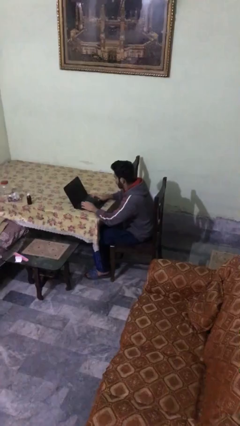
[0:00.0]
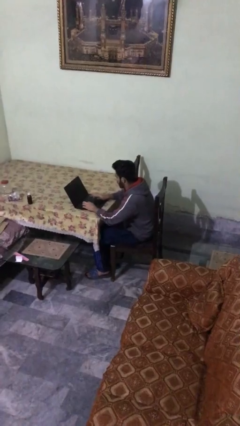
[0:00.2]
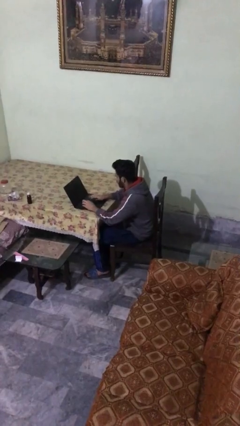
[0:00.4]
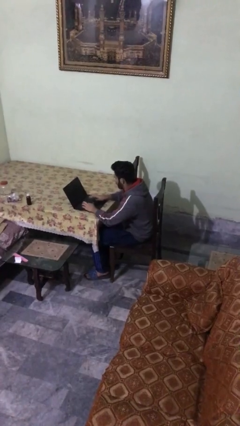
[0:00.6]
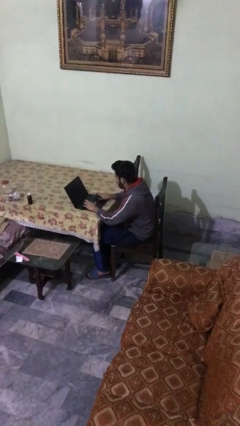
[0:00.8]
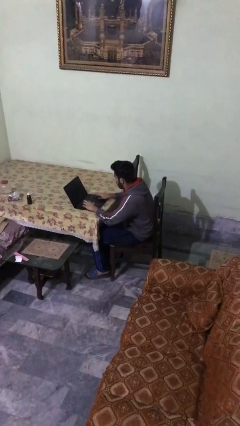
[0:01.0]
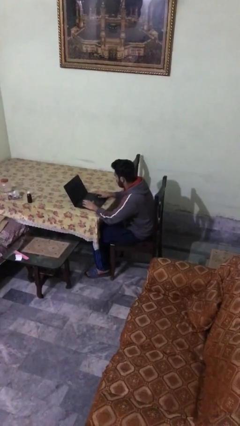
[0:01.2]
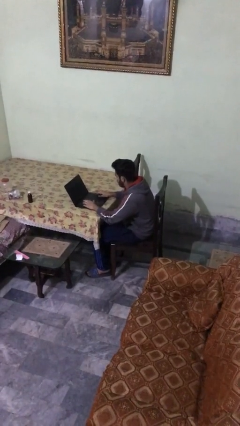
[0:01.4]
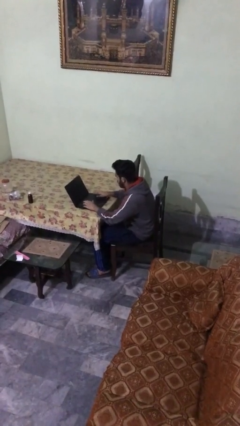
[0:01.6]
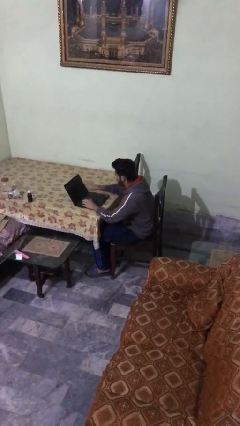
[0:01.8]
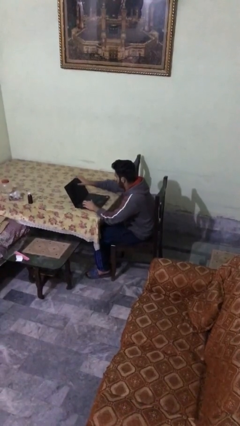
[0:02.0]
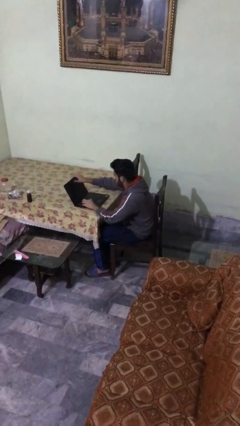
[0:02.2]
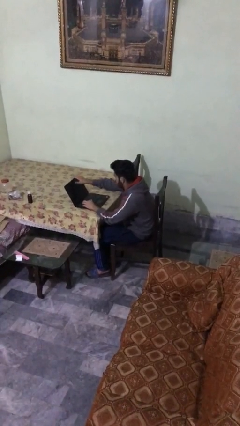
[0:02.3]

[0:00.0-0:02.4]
person interacts with laptop

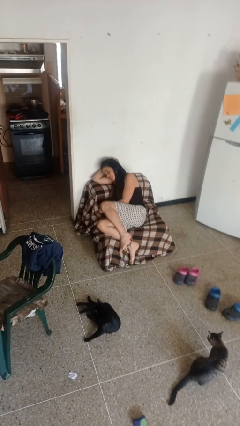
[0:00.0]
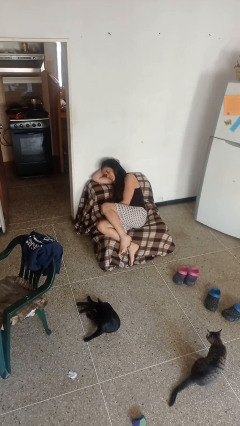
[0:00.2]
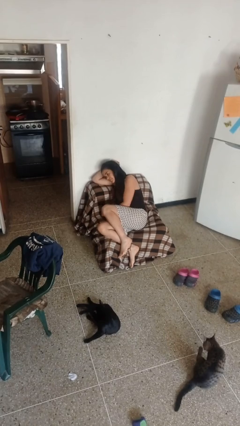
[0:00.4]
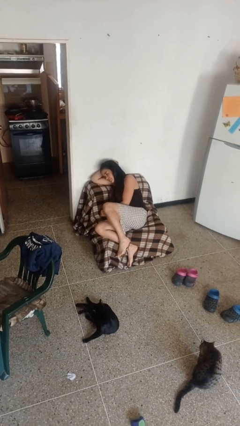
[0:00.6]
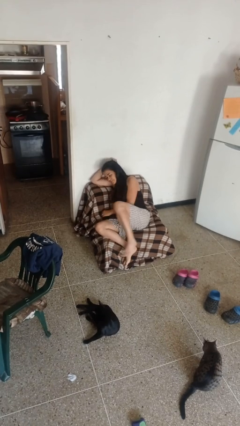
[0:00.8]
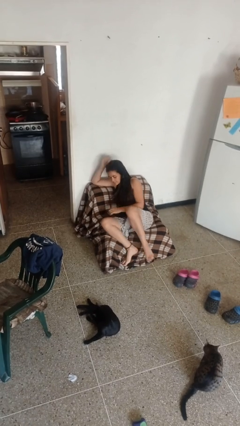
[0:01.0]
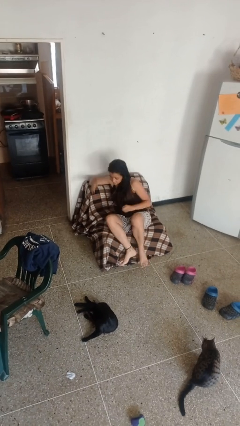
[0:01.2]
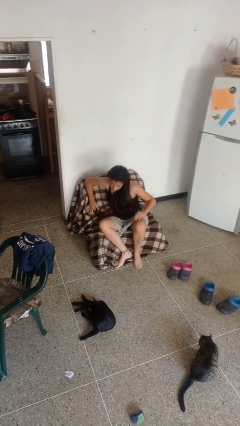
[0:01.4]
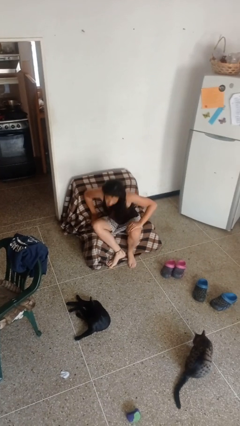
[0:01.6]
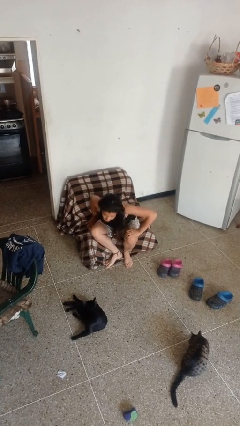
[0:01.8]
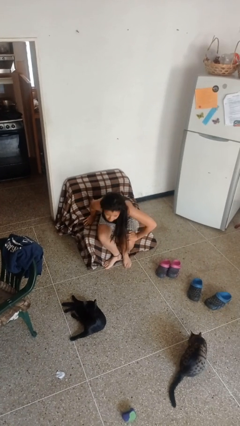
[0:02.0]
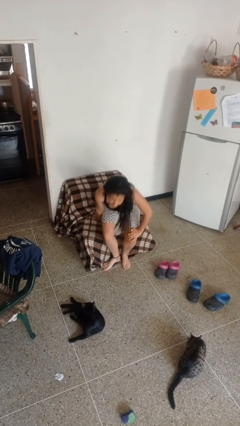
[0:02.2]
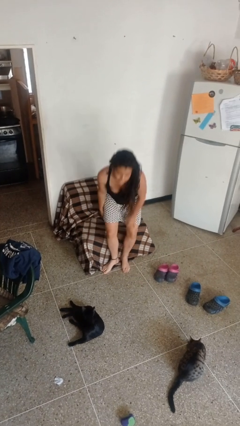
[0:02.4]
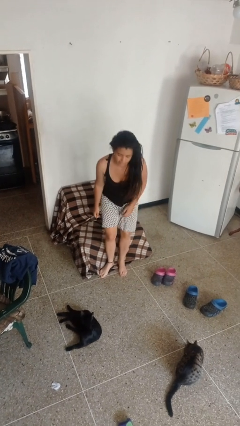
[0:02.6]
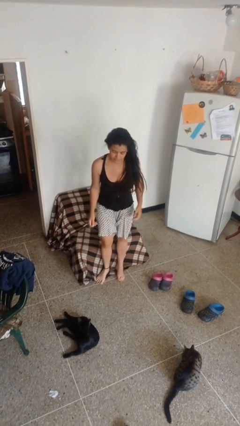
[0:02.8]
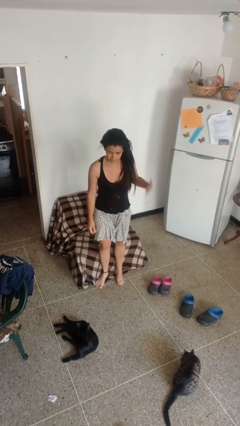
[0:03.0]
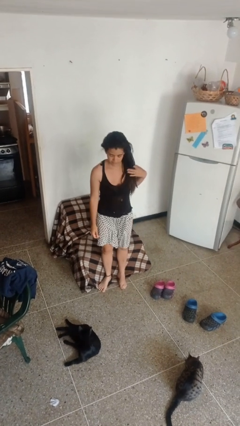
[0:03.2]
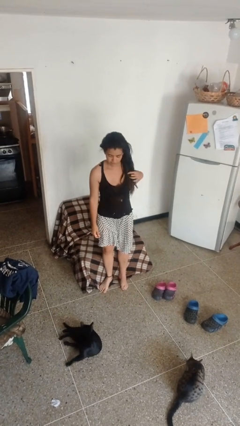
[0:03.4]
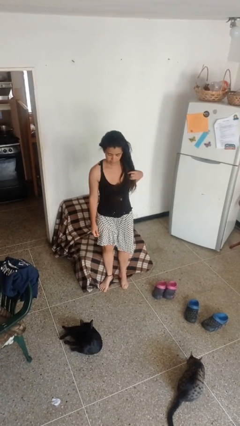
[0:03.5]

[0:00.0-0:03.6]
person stands up

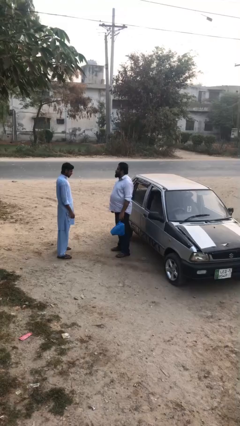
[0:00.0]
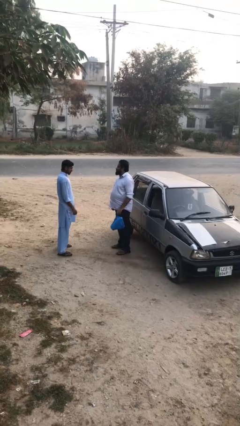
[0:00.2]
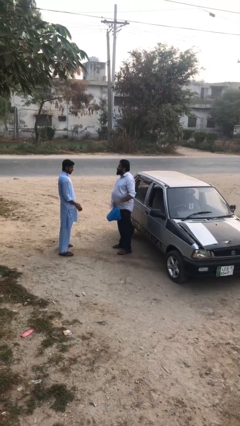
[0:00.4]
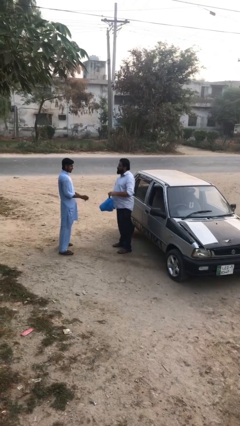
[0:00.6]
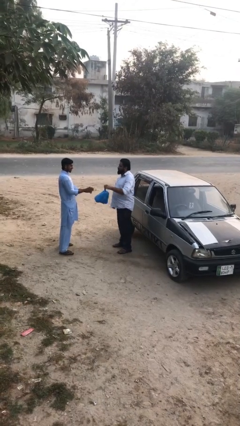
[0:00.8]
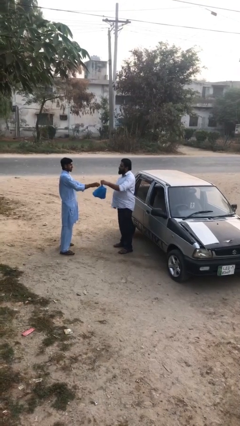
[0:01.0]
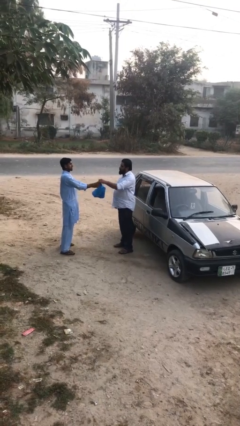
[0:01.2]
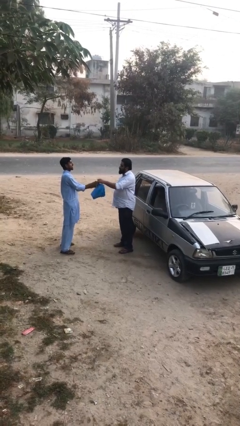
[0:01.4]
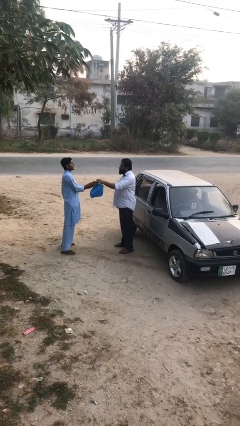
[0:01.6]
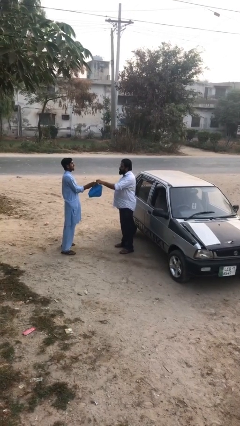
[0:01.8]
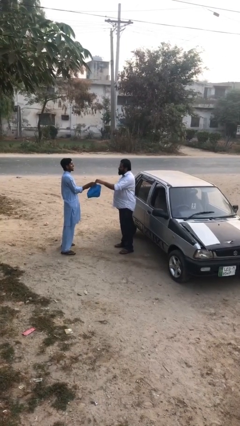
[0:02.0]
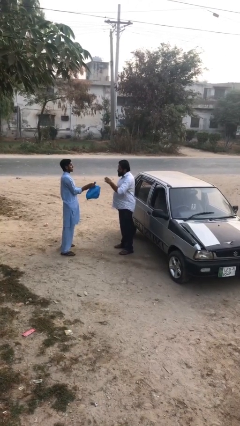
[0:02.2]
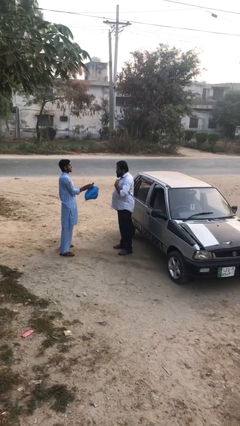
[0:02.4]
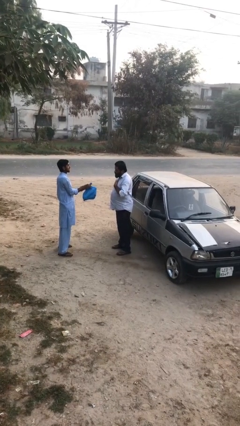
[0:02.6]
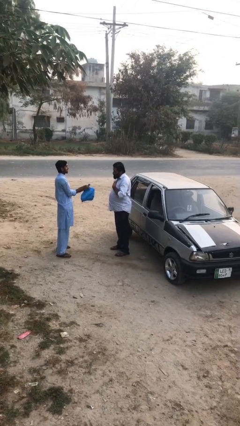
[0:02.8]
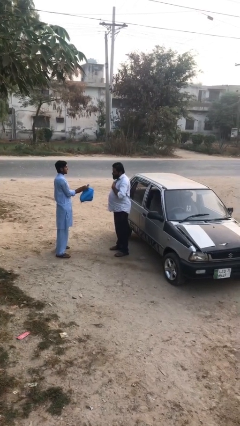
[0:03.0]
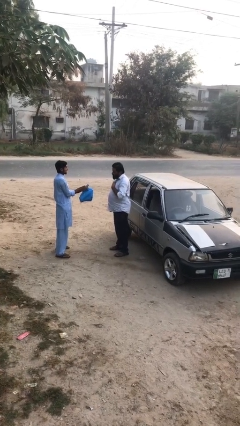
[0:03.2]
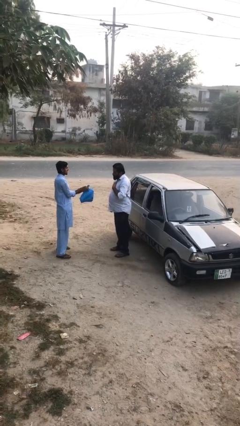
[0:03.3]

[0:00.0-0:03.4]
person transfers object to person

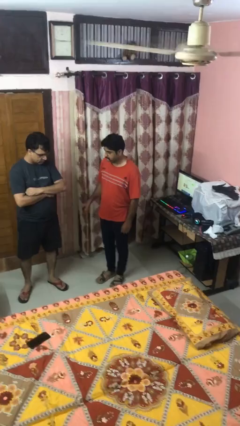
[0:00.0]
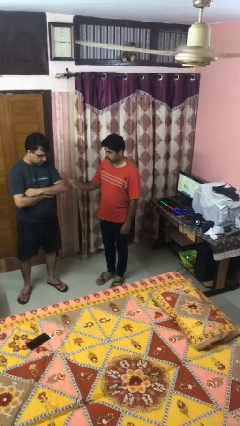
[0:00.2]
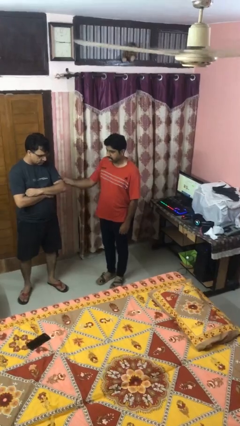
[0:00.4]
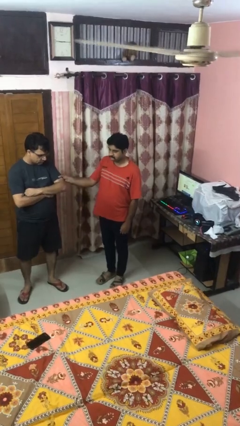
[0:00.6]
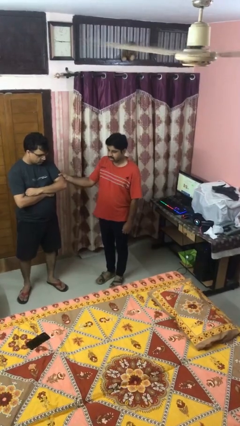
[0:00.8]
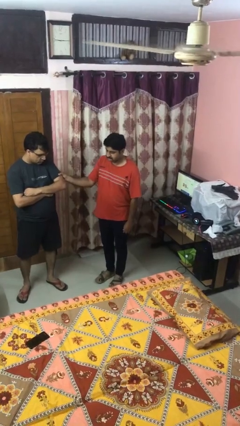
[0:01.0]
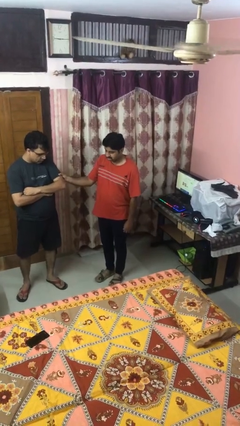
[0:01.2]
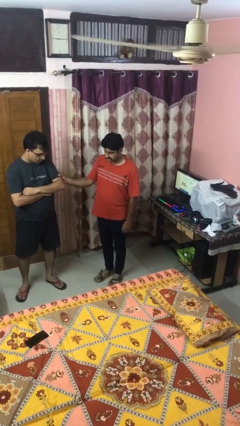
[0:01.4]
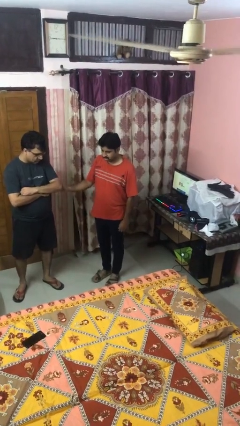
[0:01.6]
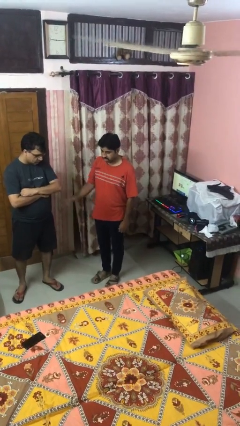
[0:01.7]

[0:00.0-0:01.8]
person grabs person by bicep

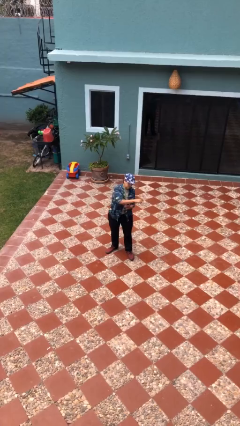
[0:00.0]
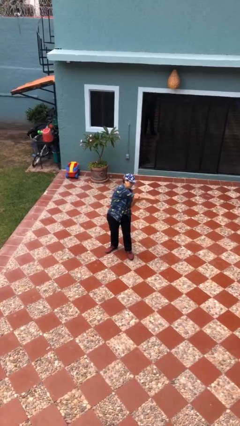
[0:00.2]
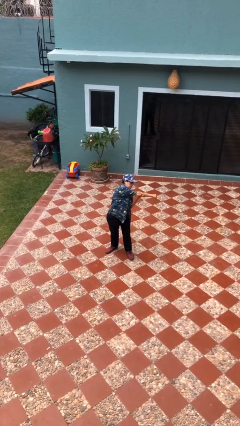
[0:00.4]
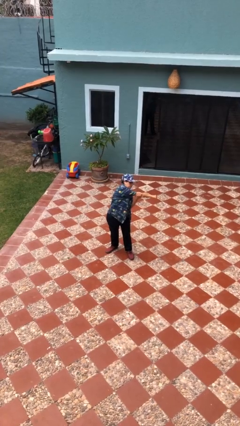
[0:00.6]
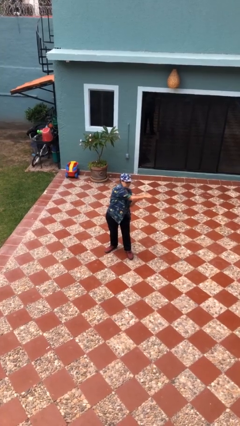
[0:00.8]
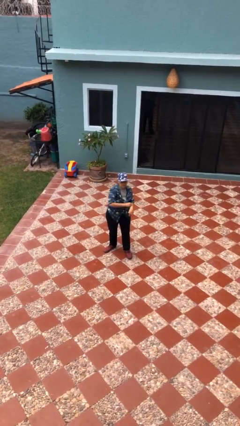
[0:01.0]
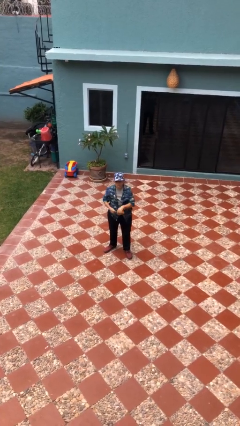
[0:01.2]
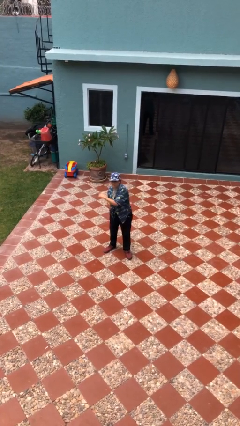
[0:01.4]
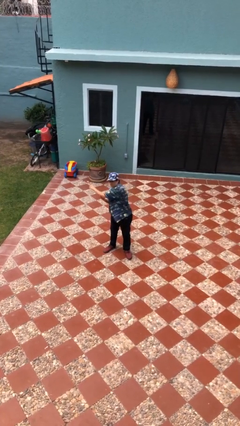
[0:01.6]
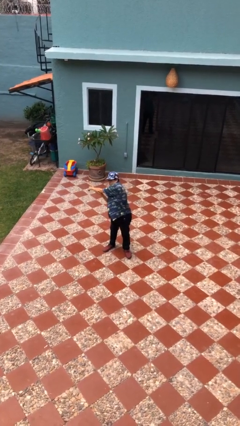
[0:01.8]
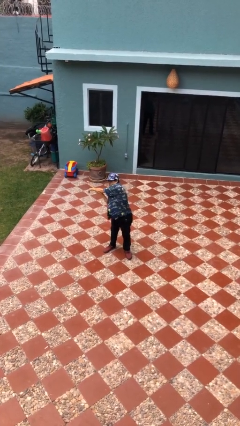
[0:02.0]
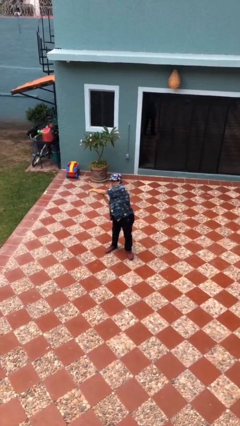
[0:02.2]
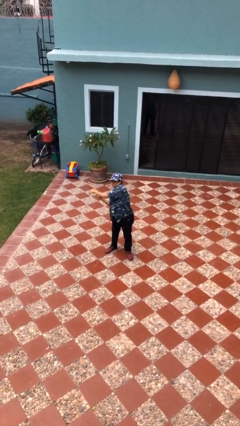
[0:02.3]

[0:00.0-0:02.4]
person stretches arms to side

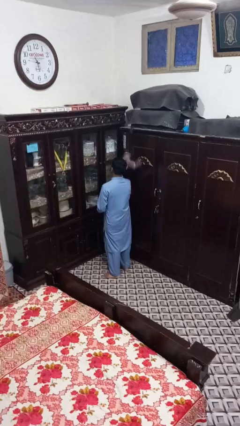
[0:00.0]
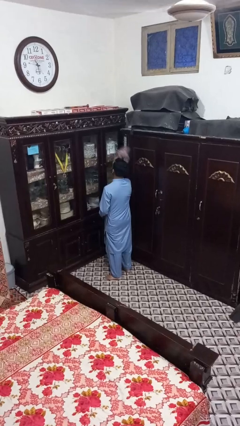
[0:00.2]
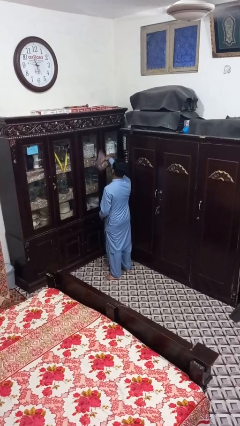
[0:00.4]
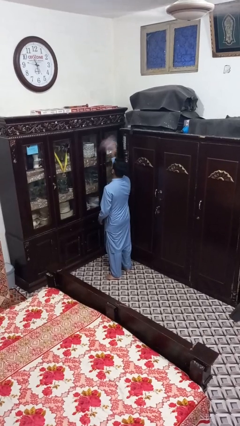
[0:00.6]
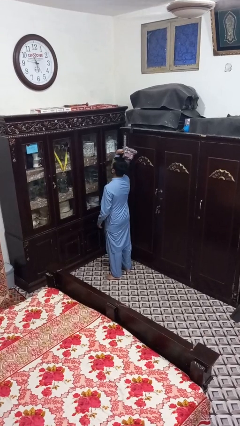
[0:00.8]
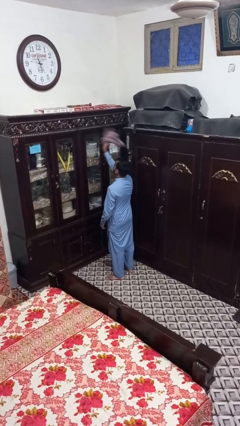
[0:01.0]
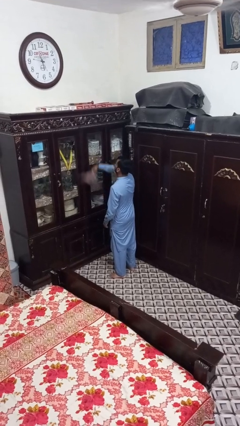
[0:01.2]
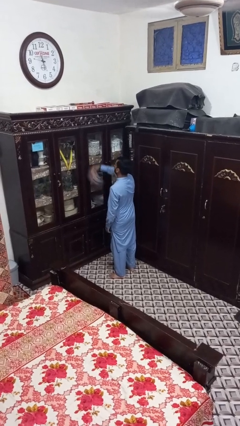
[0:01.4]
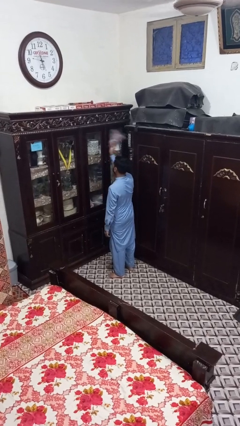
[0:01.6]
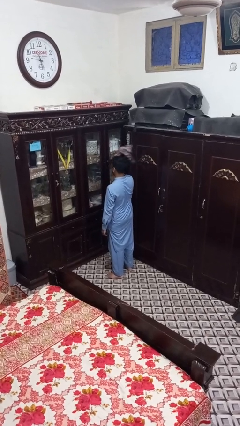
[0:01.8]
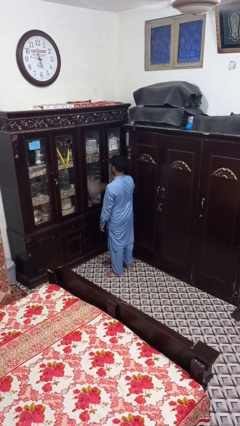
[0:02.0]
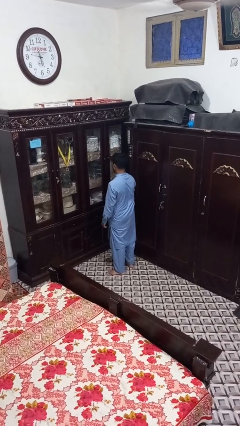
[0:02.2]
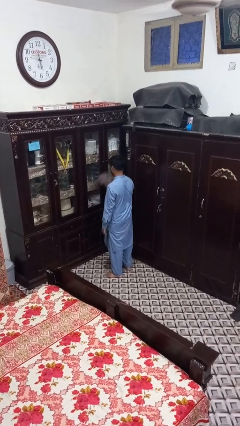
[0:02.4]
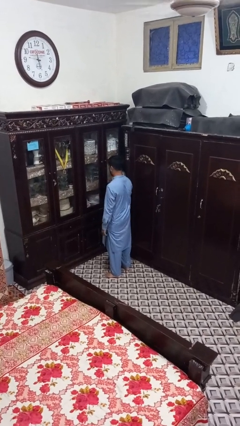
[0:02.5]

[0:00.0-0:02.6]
person dusts furniture

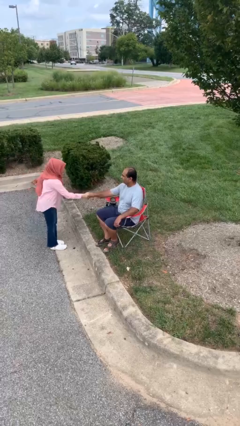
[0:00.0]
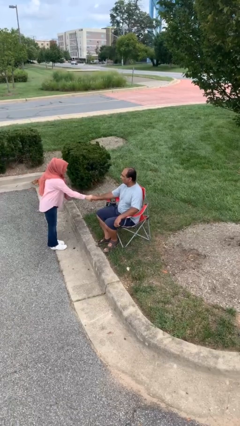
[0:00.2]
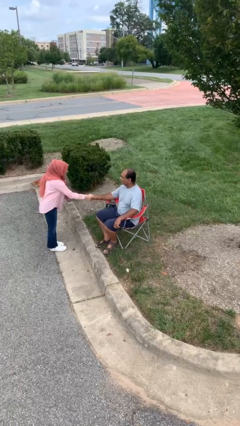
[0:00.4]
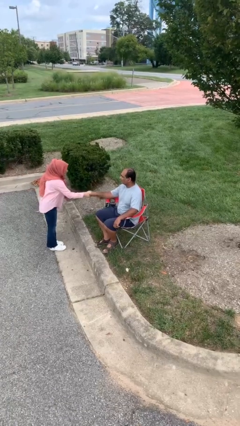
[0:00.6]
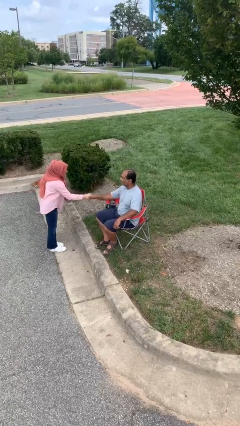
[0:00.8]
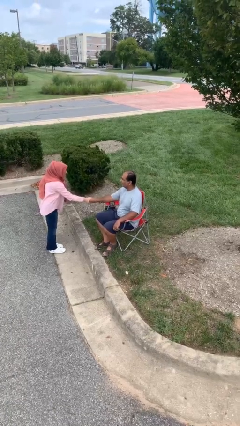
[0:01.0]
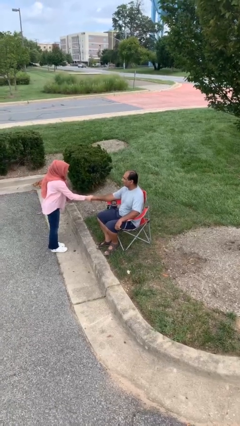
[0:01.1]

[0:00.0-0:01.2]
person shakes hand
